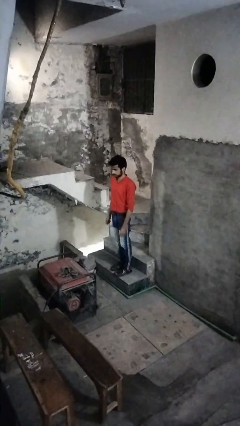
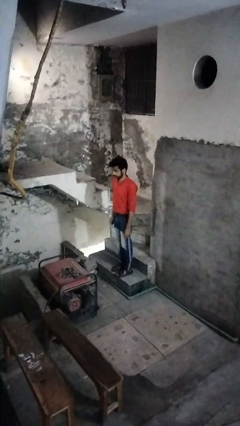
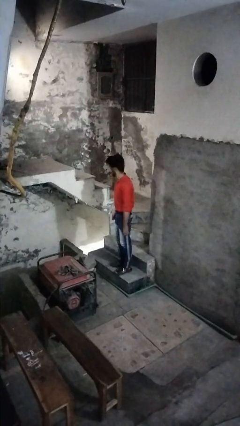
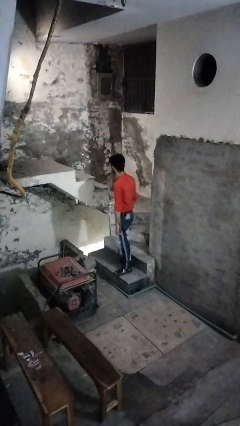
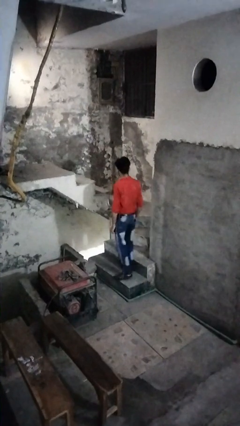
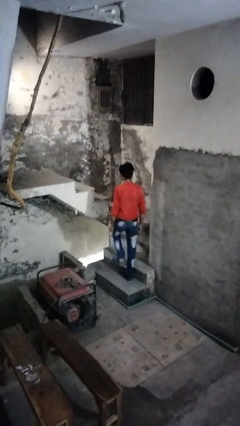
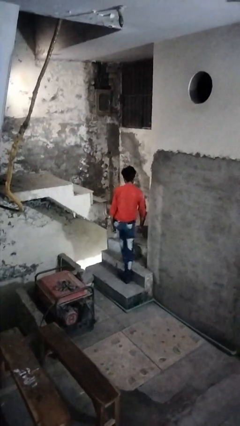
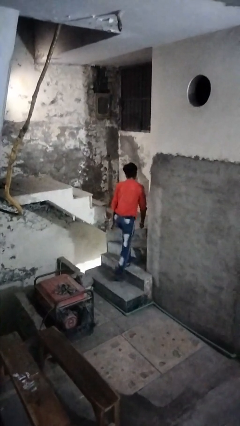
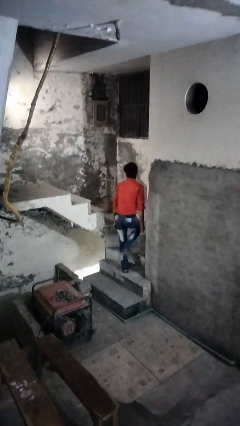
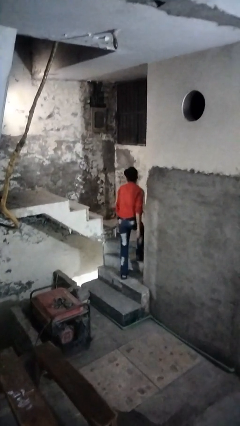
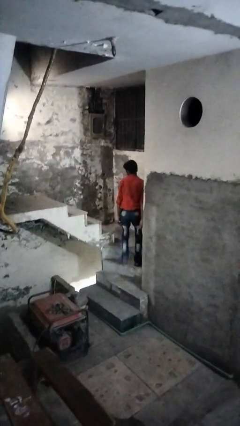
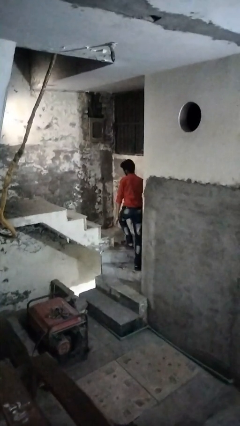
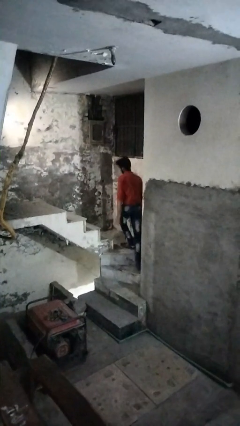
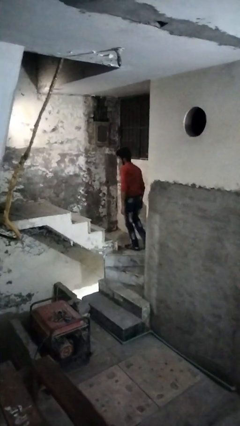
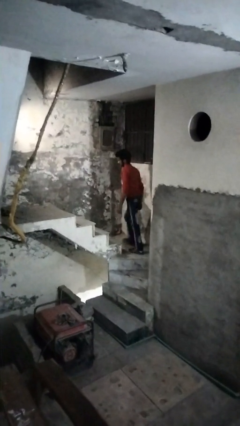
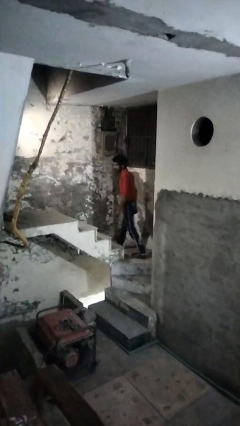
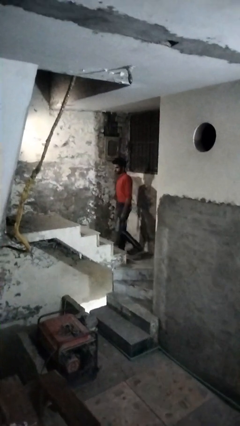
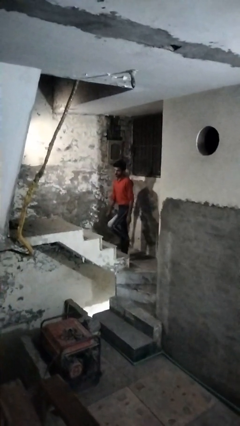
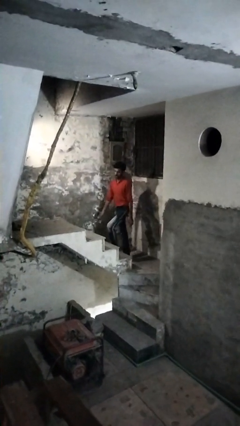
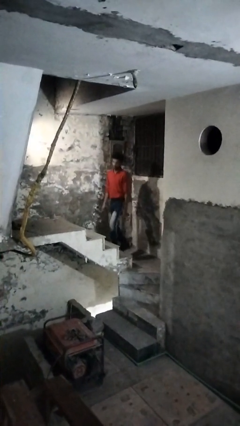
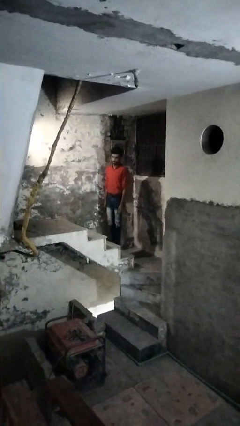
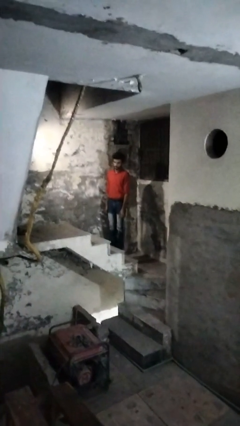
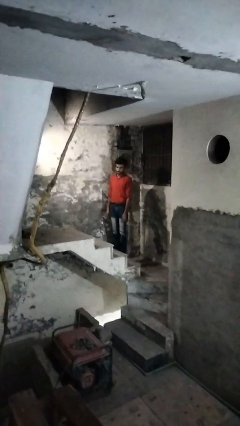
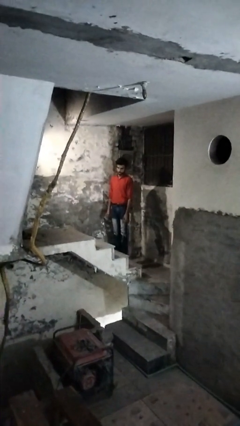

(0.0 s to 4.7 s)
person climbs up stairs

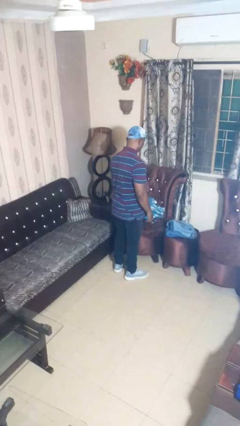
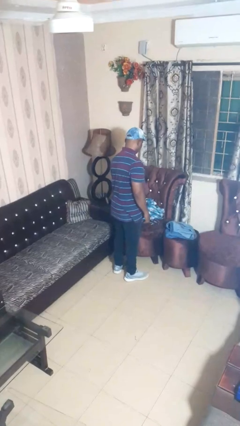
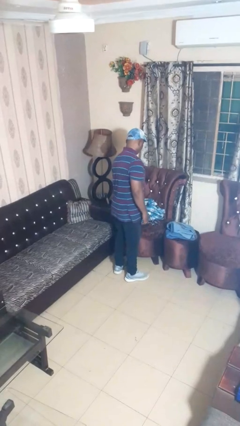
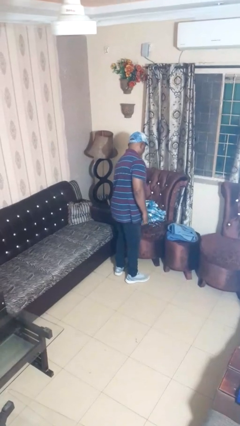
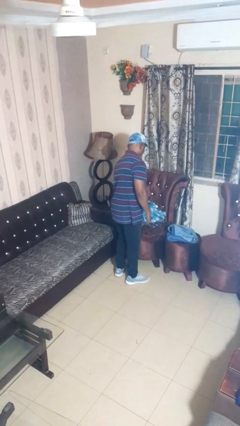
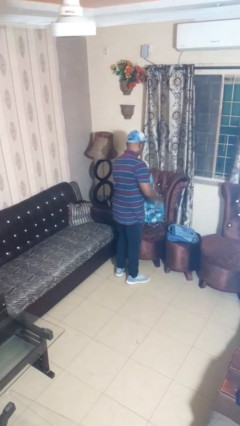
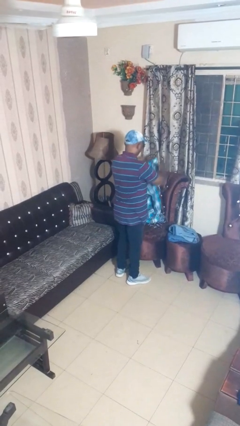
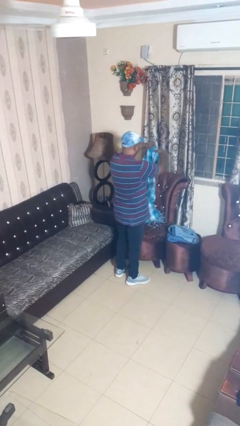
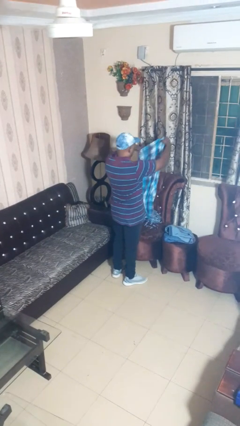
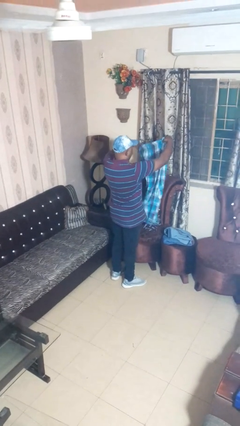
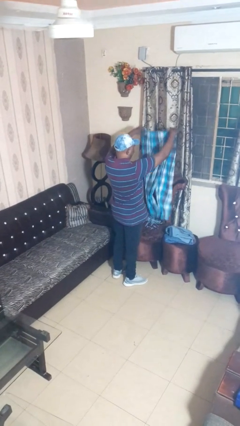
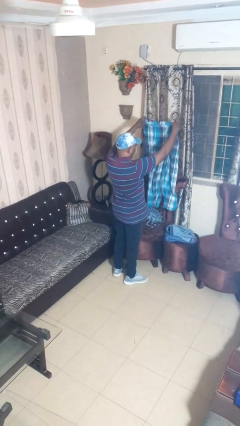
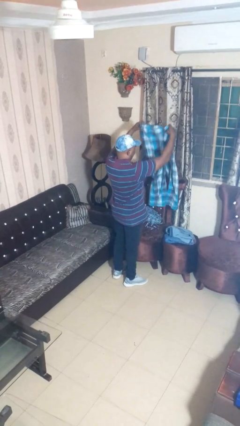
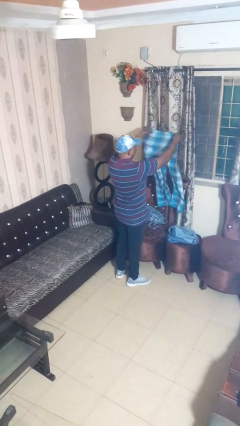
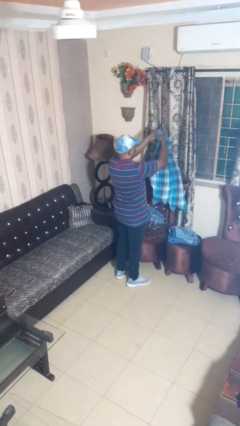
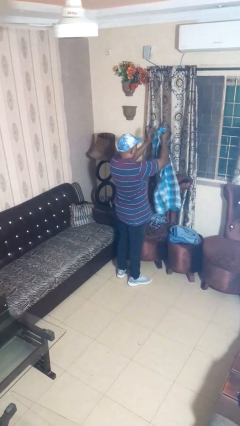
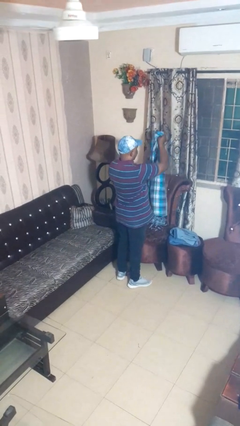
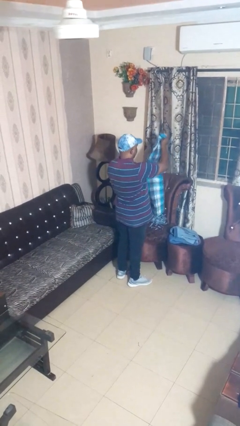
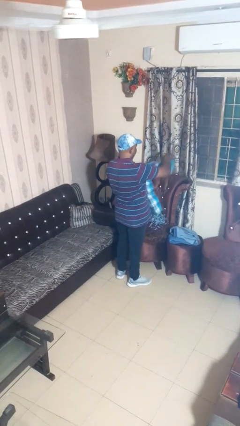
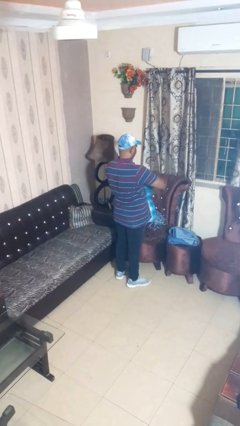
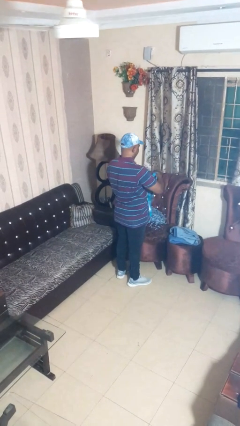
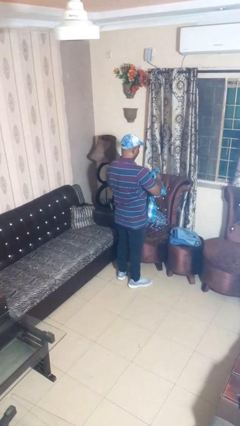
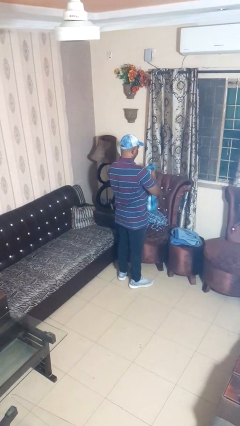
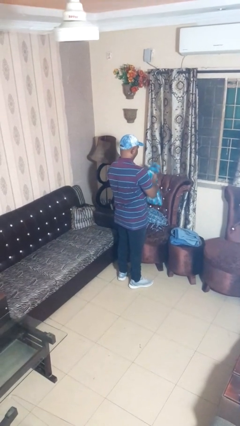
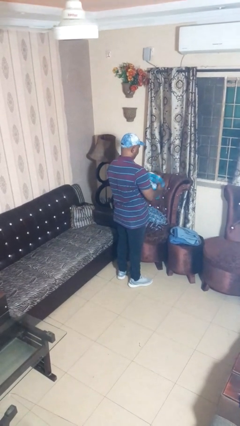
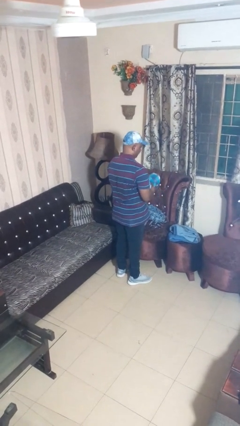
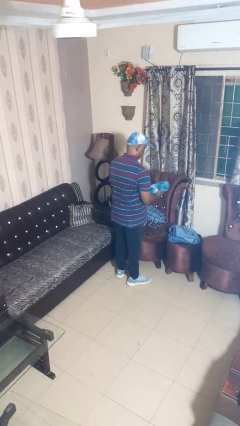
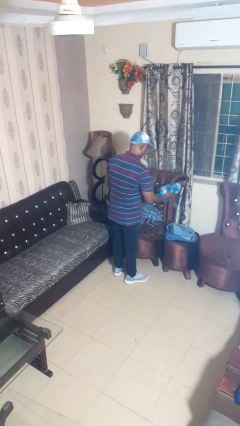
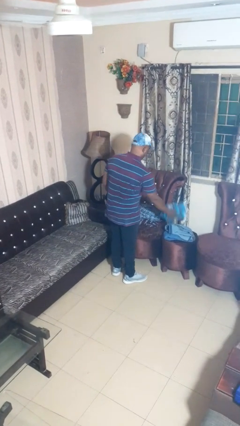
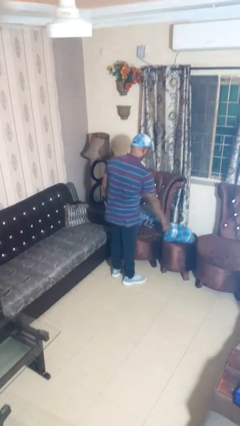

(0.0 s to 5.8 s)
person folds pants

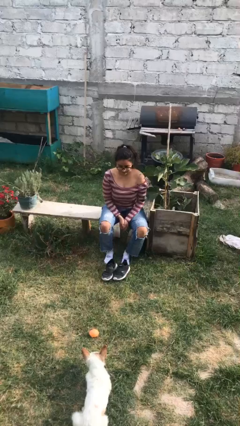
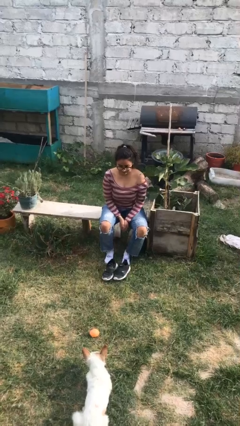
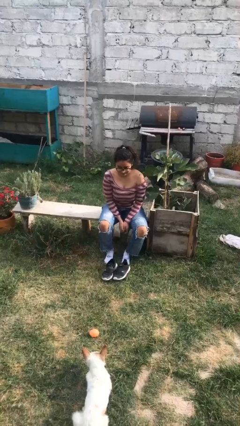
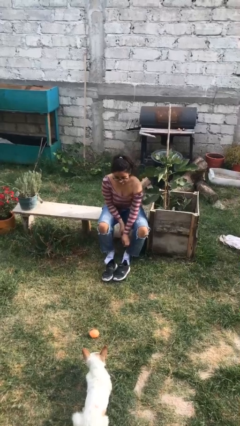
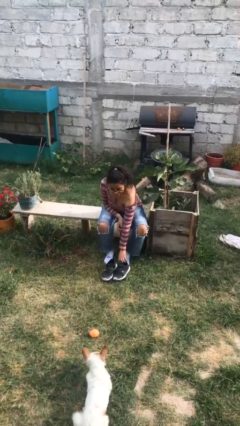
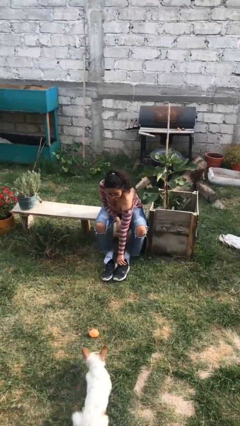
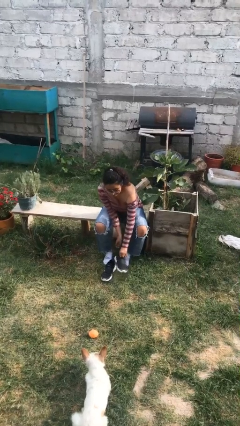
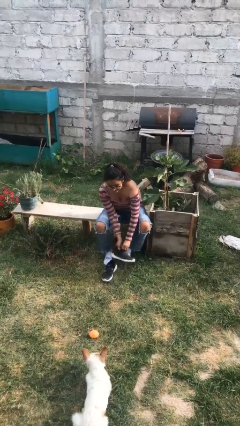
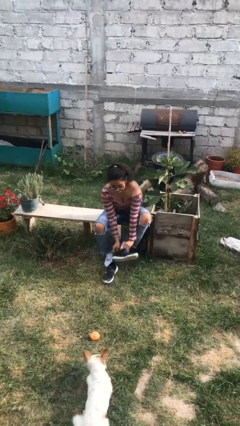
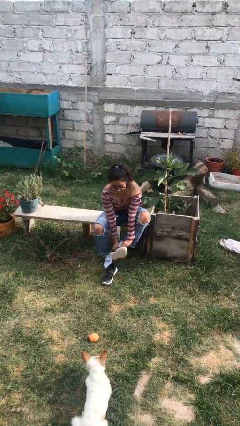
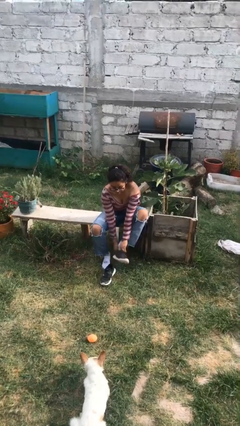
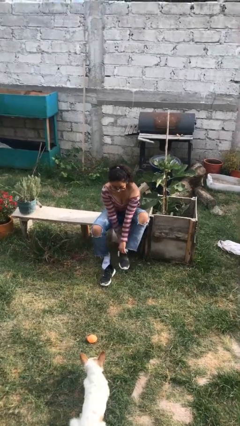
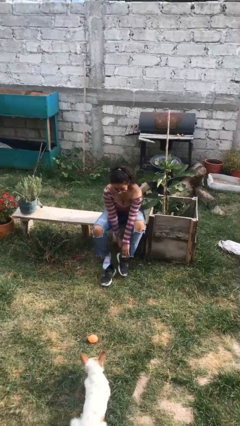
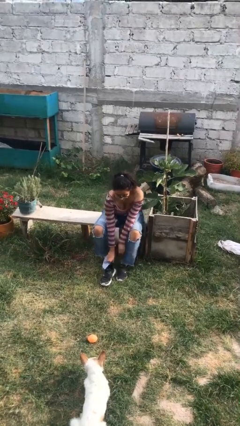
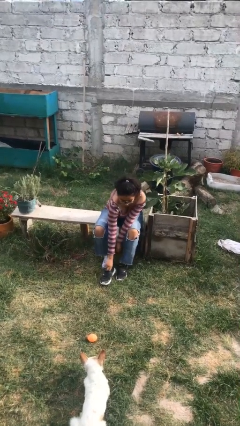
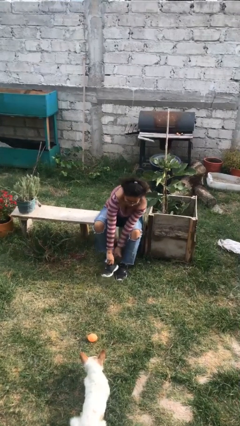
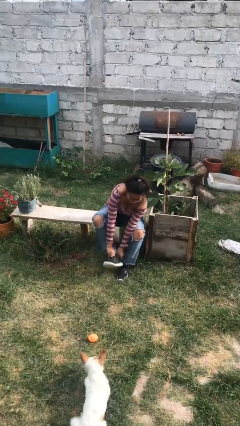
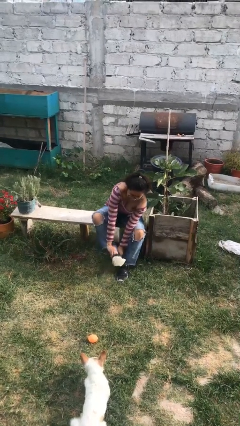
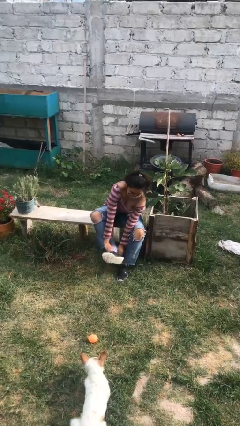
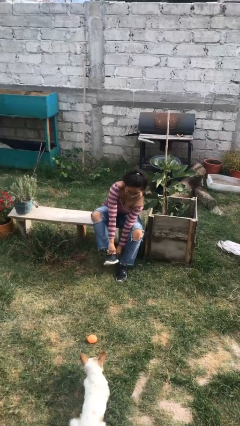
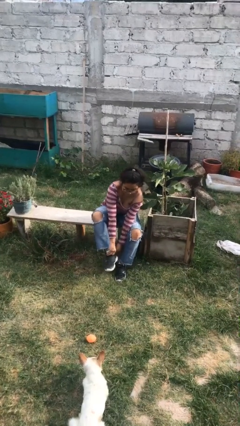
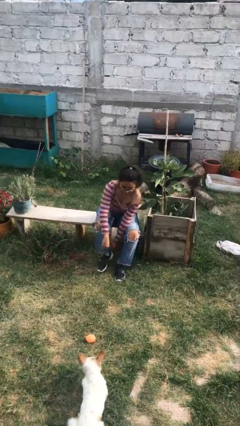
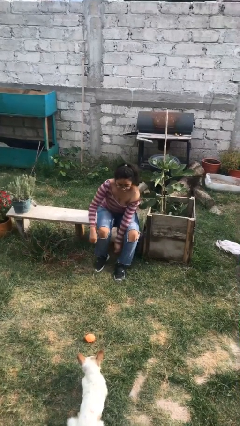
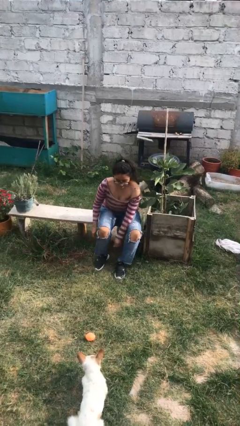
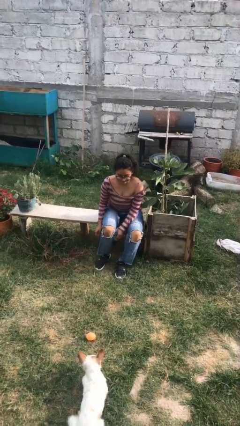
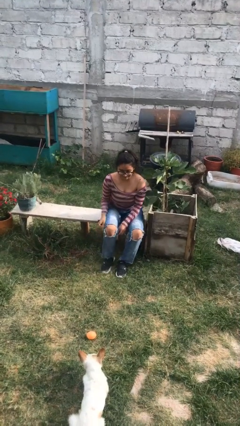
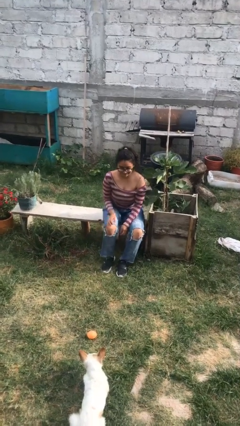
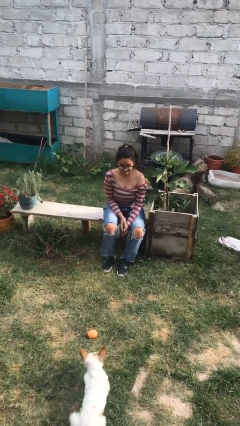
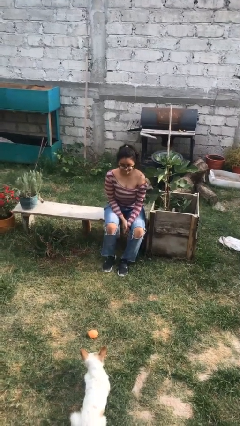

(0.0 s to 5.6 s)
person puts on shoes

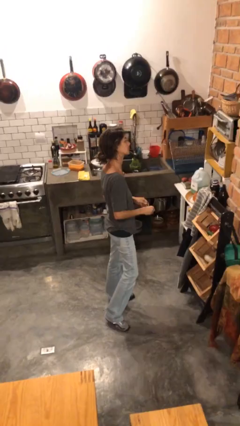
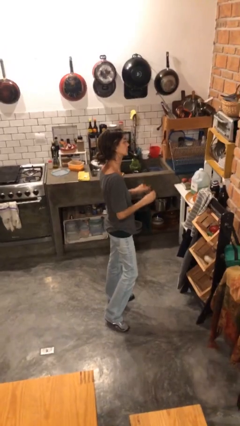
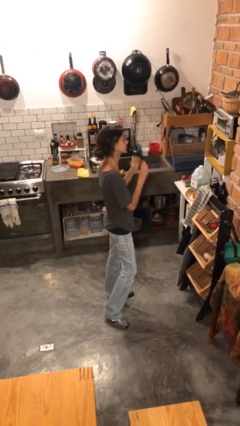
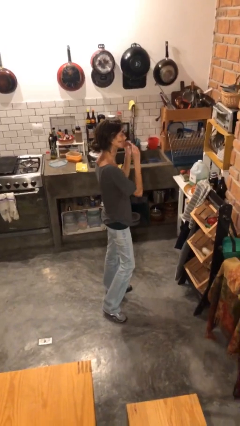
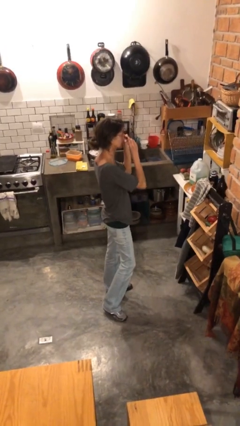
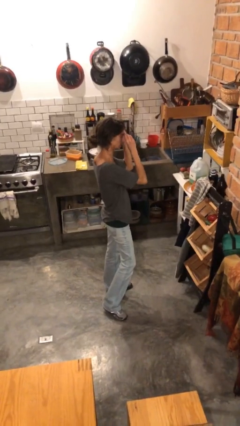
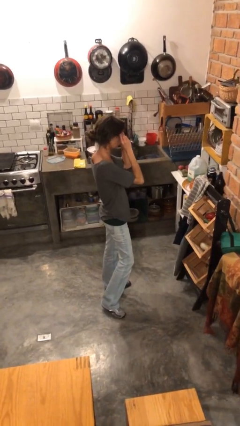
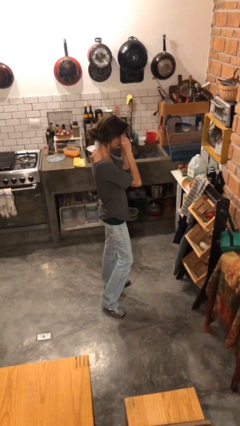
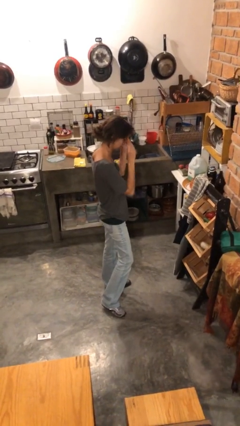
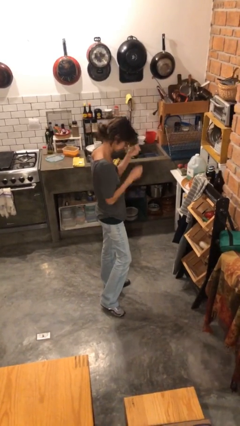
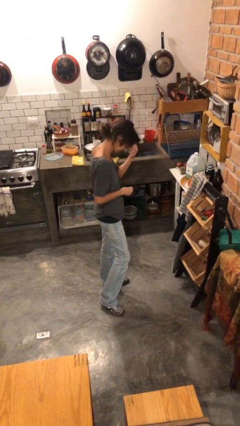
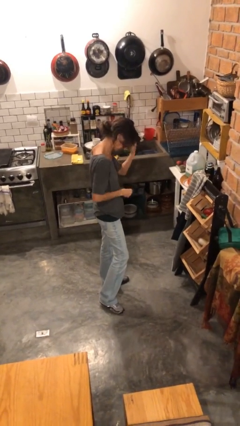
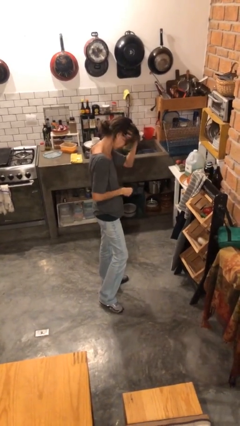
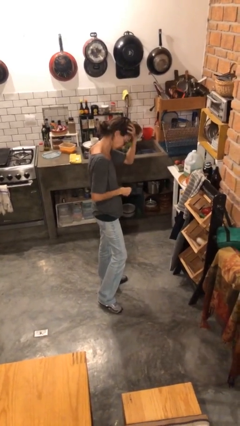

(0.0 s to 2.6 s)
person puts on glasses
